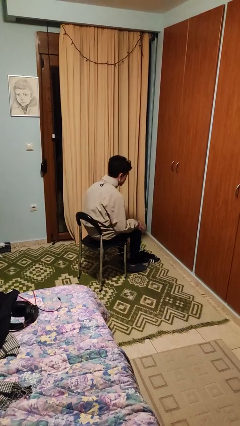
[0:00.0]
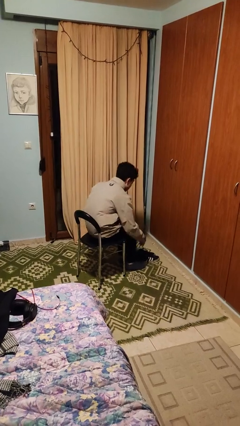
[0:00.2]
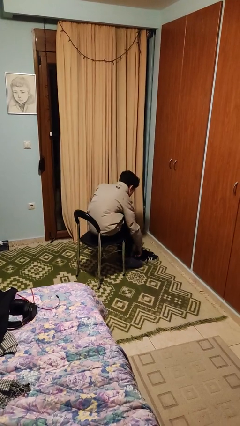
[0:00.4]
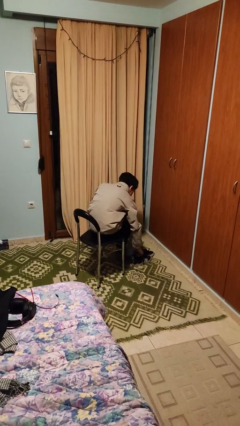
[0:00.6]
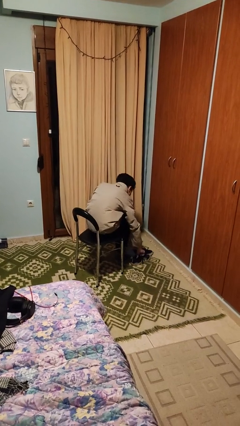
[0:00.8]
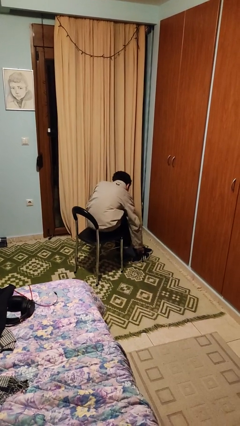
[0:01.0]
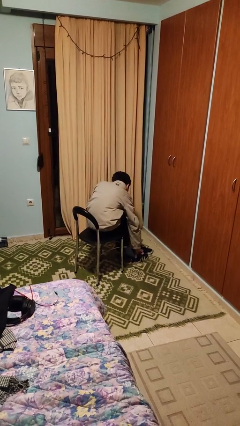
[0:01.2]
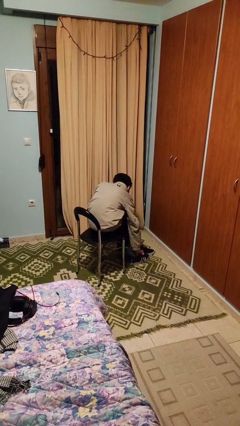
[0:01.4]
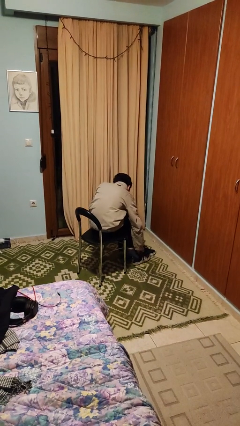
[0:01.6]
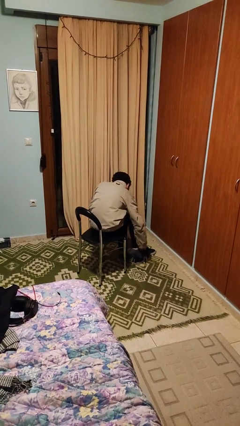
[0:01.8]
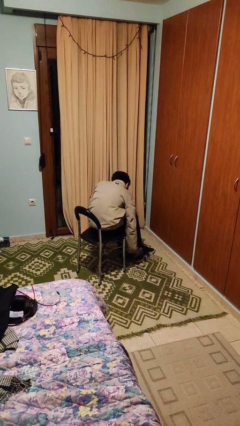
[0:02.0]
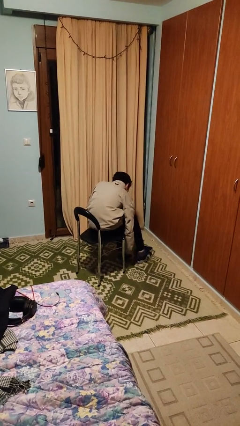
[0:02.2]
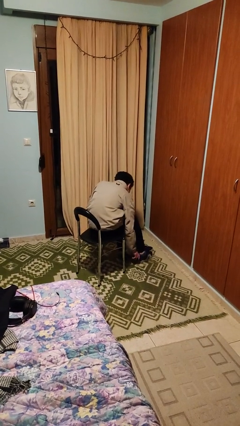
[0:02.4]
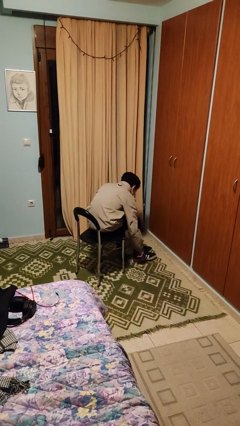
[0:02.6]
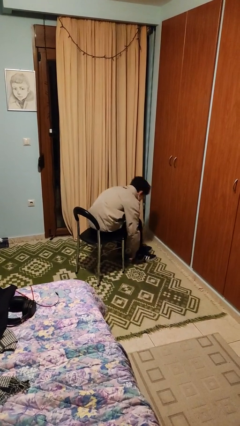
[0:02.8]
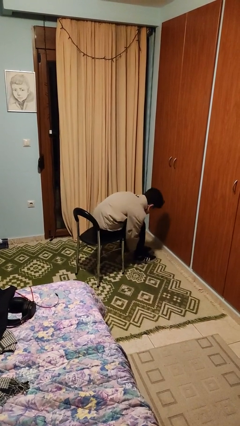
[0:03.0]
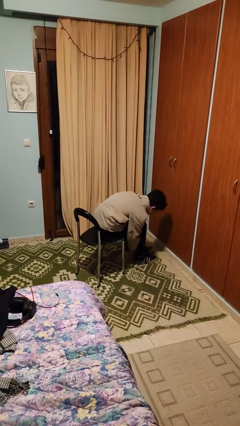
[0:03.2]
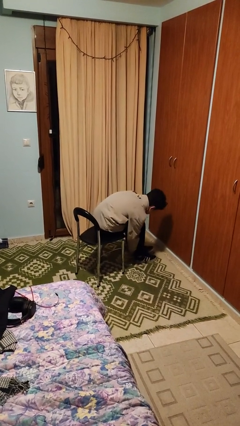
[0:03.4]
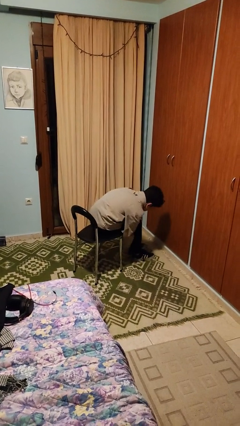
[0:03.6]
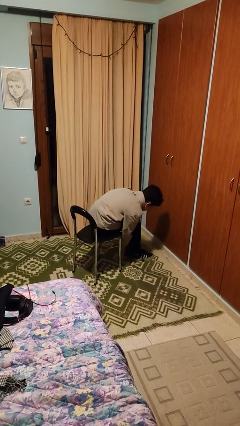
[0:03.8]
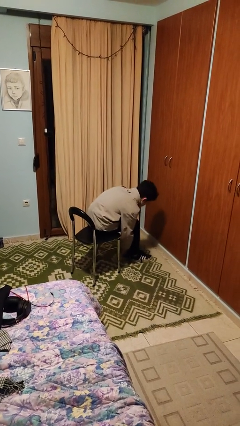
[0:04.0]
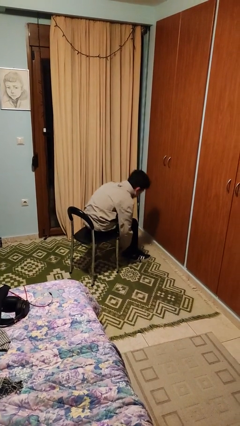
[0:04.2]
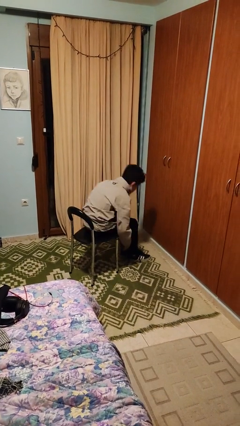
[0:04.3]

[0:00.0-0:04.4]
person puts on shoes

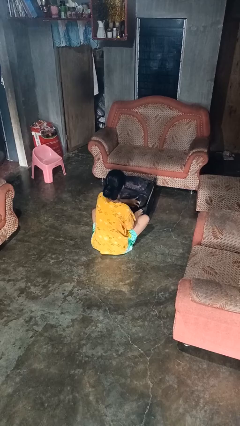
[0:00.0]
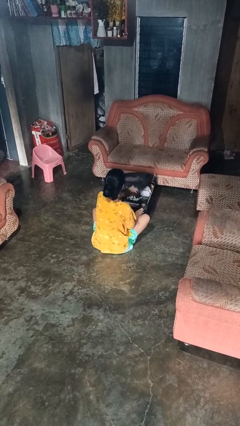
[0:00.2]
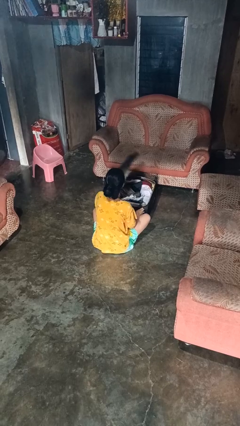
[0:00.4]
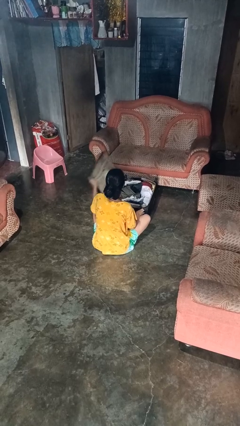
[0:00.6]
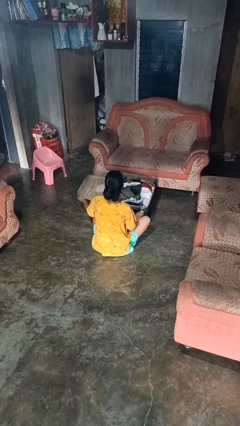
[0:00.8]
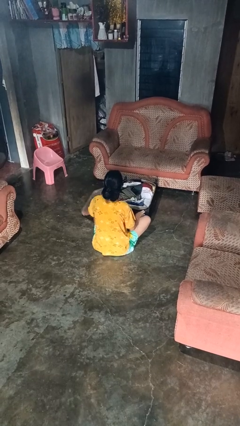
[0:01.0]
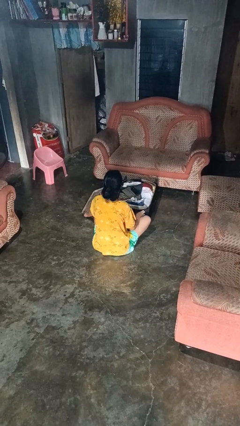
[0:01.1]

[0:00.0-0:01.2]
person opens suitcase

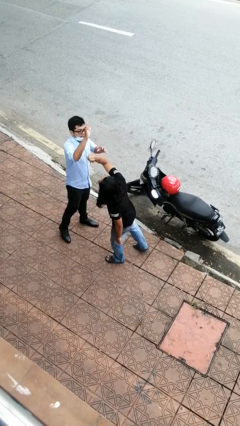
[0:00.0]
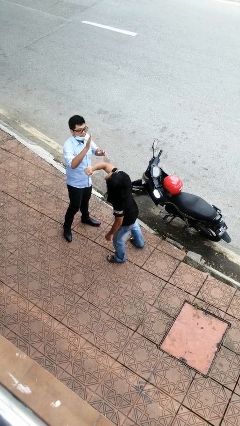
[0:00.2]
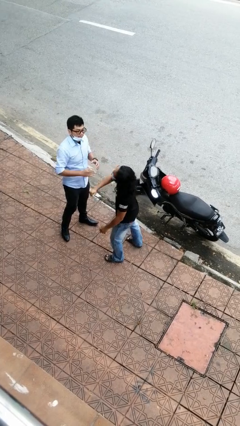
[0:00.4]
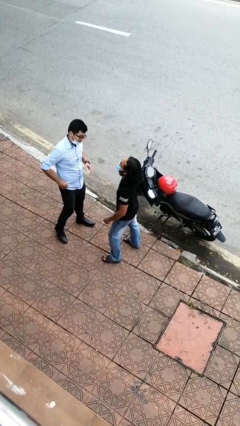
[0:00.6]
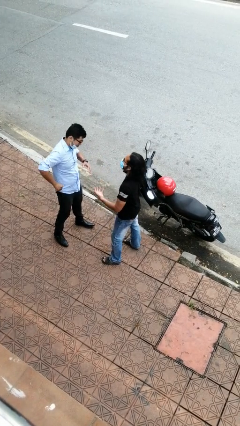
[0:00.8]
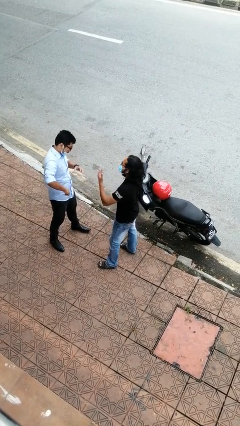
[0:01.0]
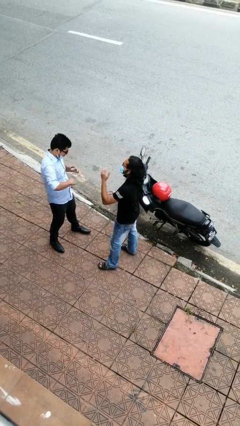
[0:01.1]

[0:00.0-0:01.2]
person highfives hand

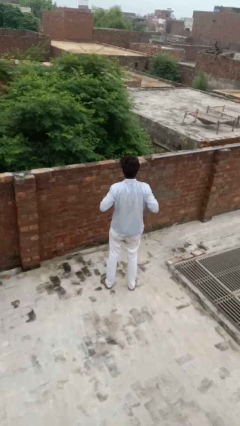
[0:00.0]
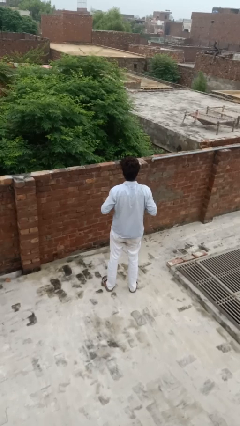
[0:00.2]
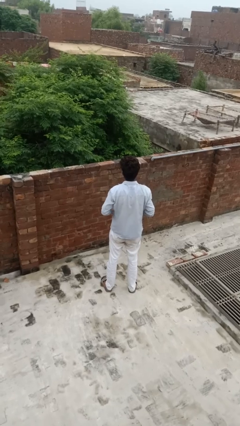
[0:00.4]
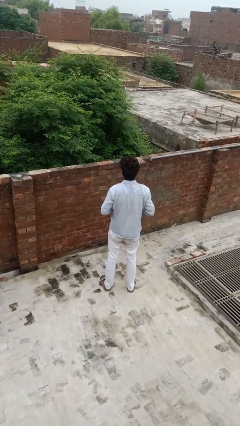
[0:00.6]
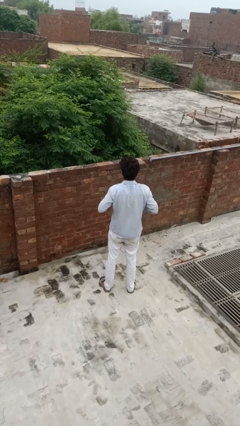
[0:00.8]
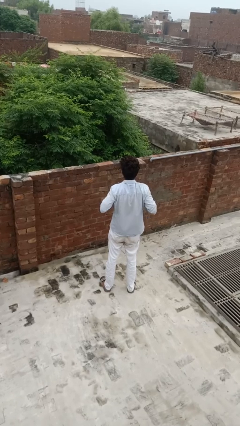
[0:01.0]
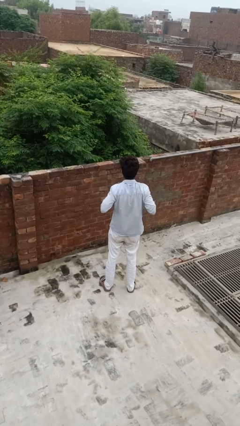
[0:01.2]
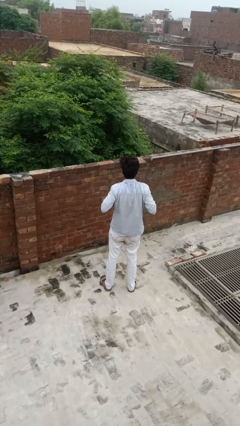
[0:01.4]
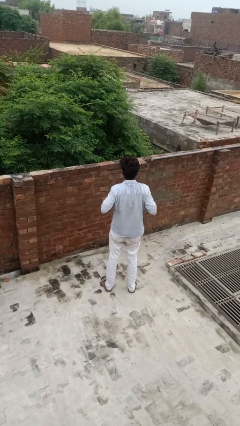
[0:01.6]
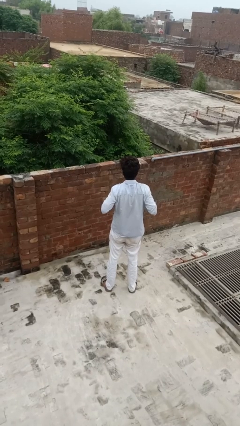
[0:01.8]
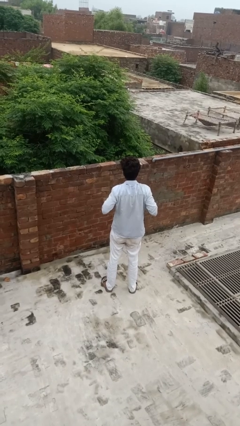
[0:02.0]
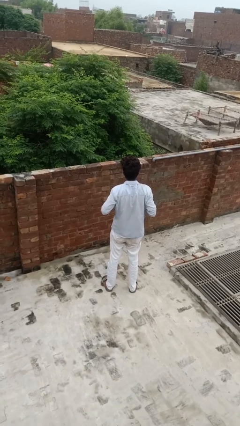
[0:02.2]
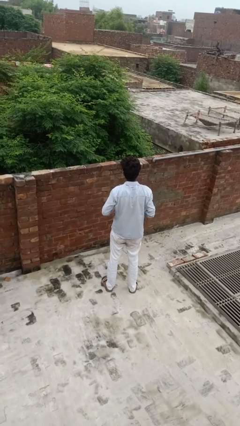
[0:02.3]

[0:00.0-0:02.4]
person cracks knuckles

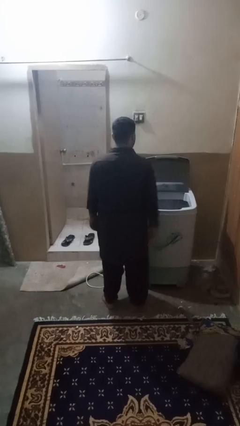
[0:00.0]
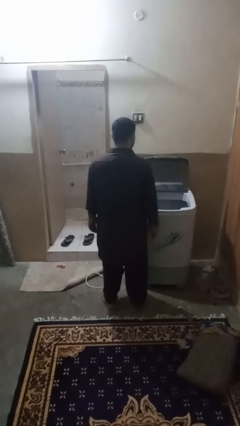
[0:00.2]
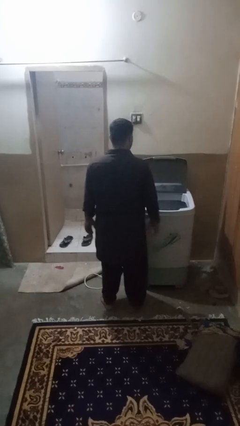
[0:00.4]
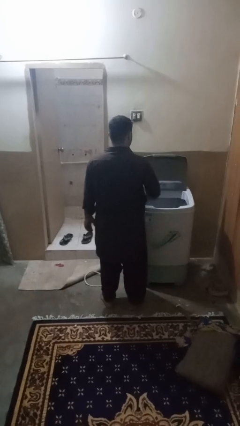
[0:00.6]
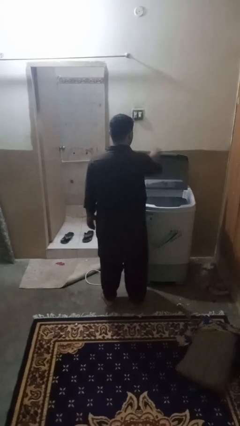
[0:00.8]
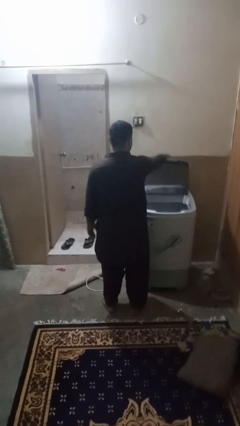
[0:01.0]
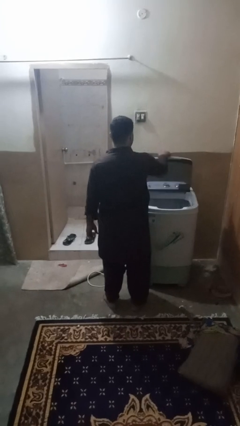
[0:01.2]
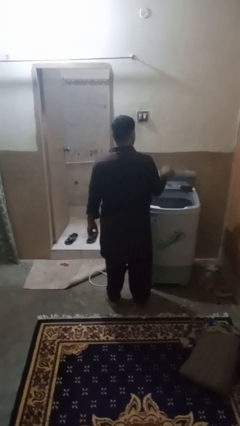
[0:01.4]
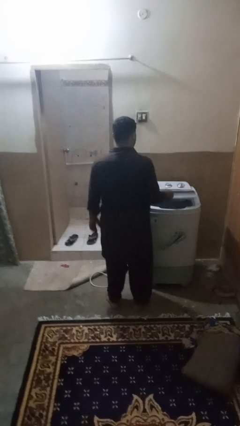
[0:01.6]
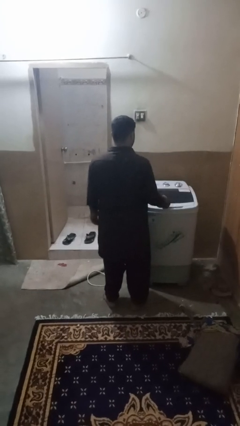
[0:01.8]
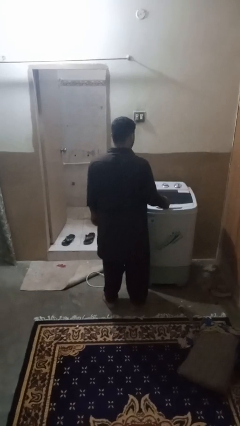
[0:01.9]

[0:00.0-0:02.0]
person closes clothes washer

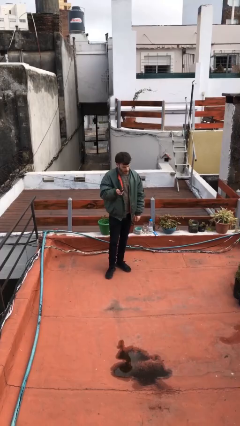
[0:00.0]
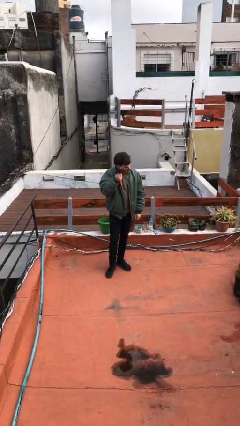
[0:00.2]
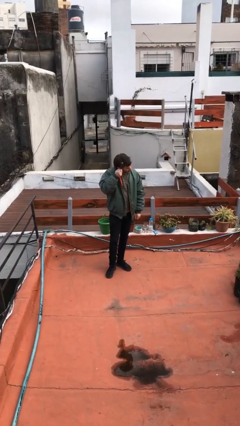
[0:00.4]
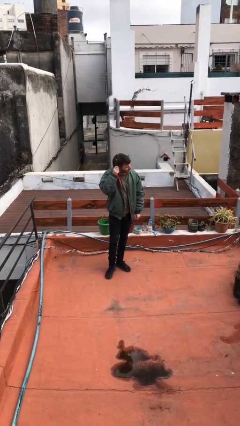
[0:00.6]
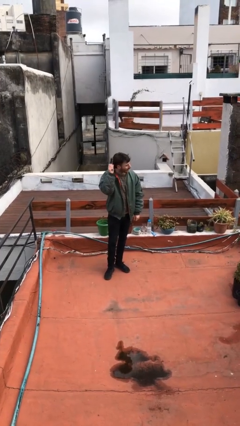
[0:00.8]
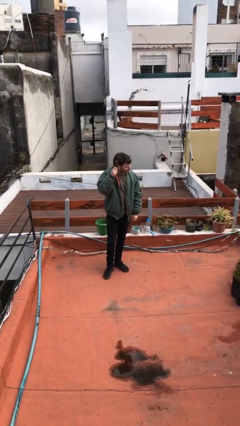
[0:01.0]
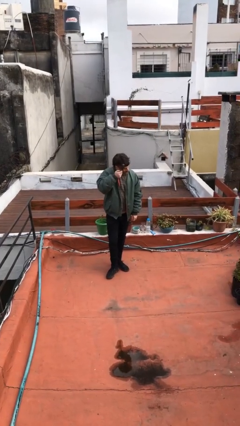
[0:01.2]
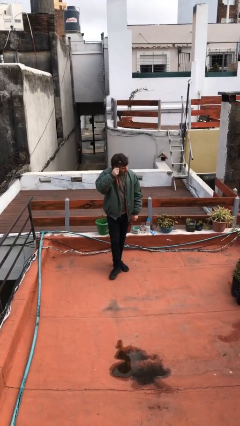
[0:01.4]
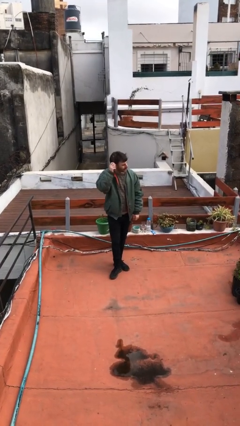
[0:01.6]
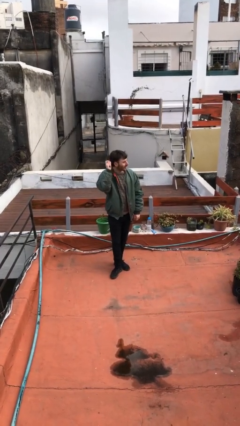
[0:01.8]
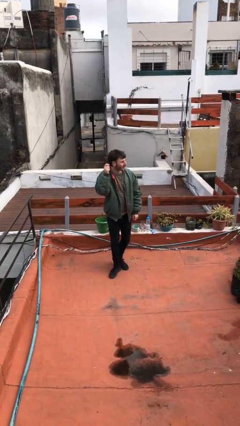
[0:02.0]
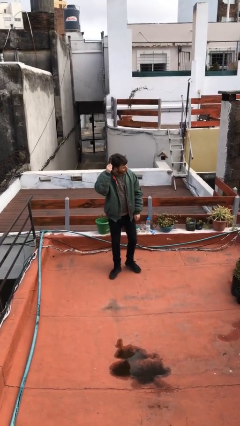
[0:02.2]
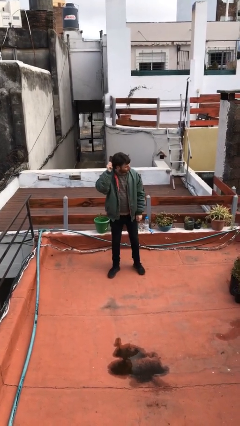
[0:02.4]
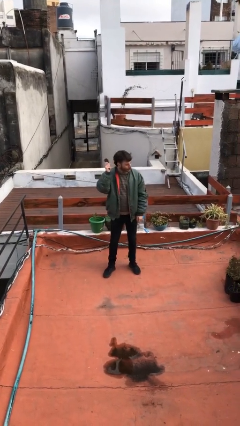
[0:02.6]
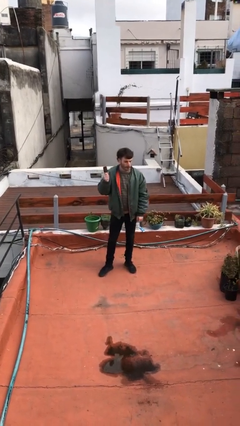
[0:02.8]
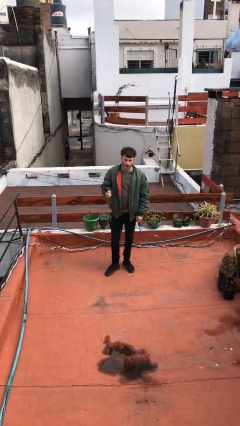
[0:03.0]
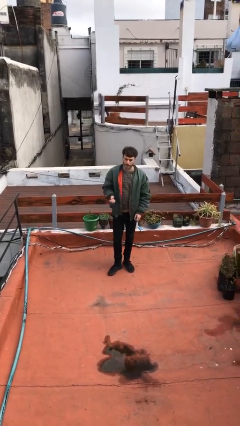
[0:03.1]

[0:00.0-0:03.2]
person brushes hair

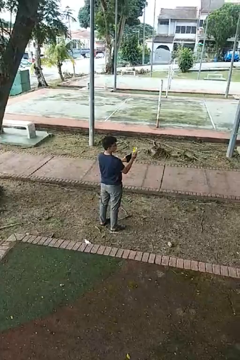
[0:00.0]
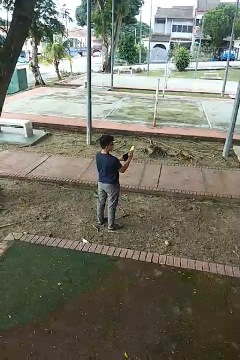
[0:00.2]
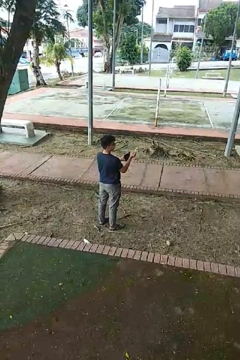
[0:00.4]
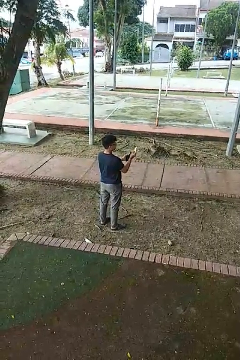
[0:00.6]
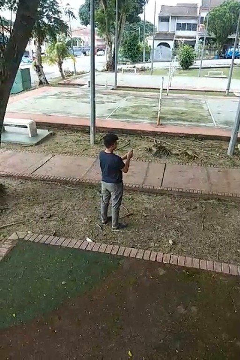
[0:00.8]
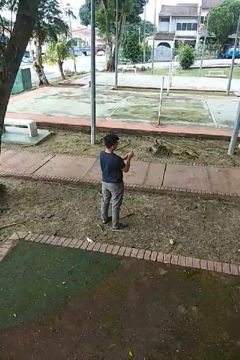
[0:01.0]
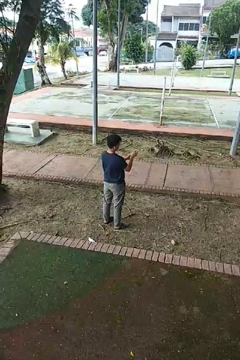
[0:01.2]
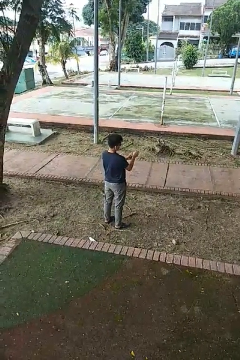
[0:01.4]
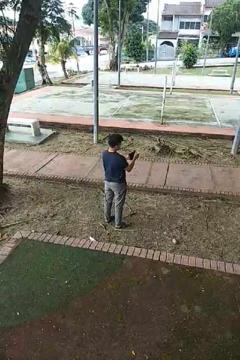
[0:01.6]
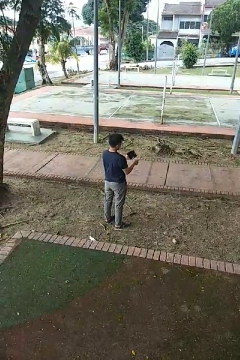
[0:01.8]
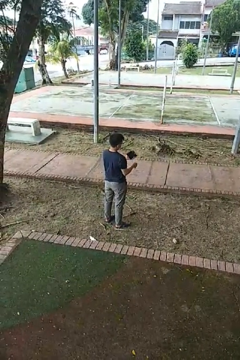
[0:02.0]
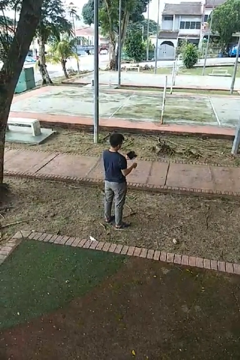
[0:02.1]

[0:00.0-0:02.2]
person puts object into purse

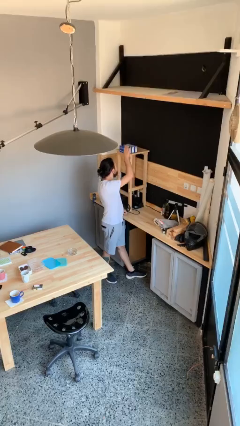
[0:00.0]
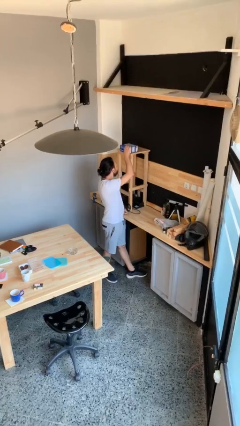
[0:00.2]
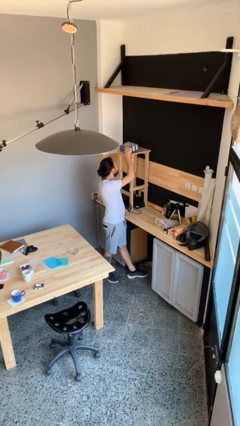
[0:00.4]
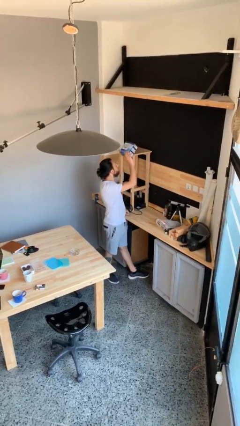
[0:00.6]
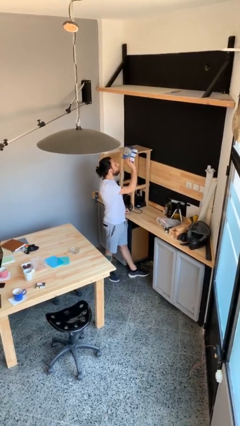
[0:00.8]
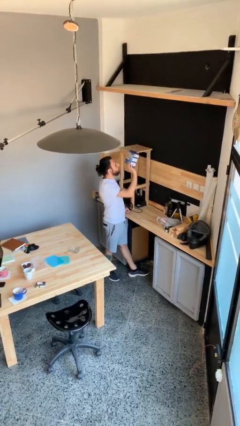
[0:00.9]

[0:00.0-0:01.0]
person picks up object from shelf
